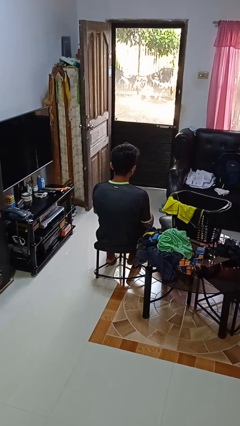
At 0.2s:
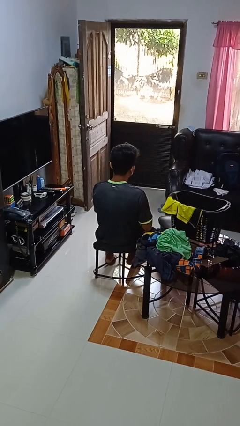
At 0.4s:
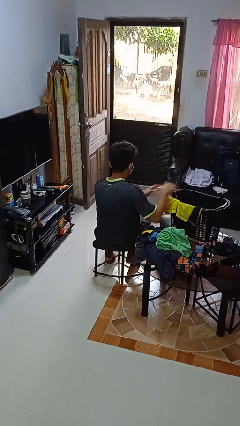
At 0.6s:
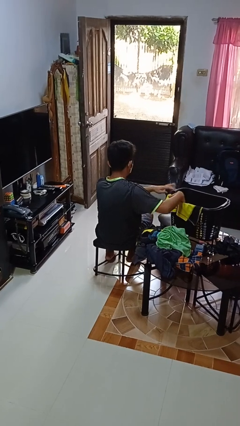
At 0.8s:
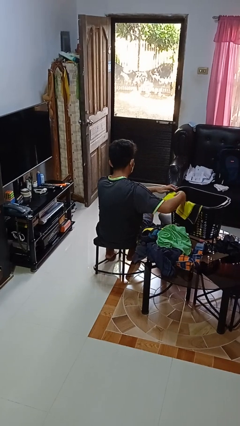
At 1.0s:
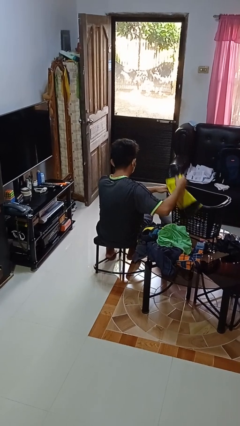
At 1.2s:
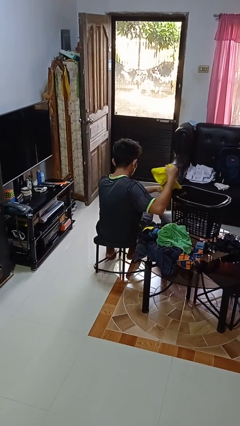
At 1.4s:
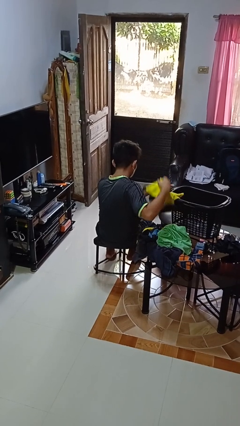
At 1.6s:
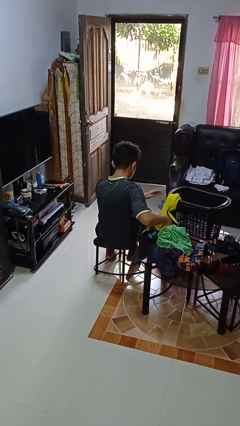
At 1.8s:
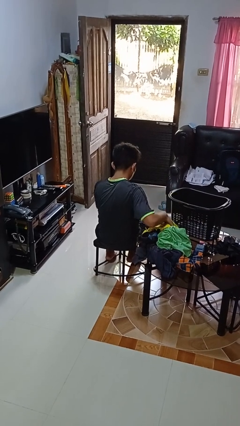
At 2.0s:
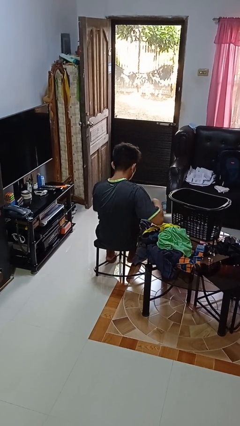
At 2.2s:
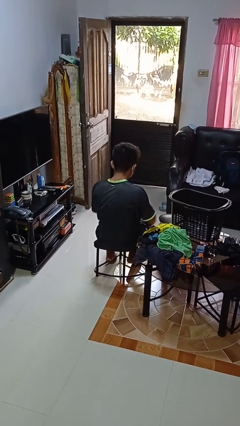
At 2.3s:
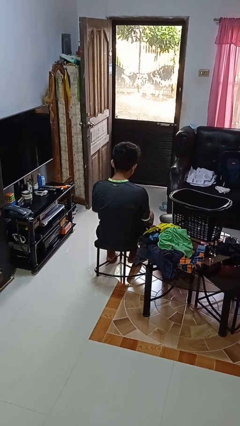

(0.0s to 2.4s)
person takes object from basket

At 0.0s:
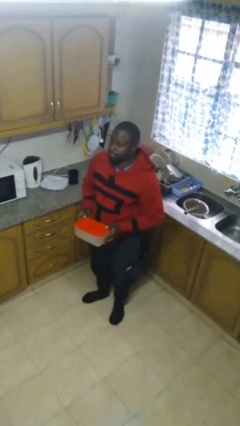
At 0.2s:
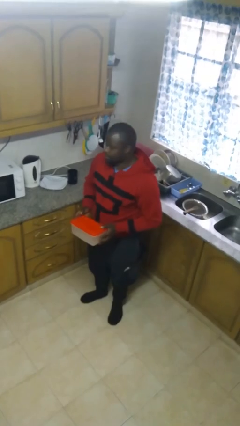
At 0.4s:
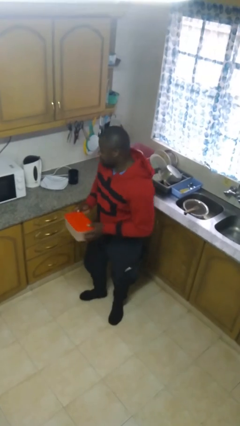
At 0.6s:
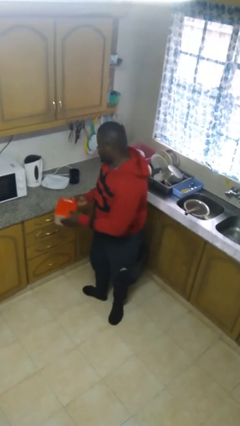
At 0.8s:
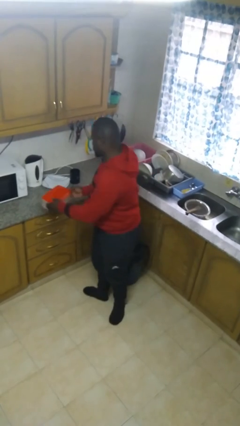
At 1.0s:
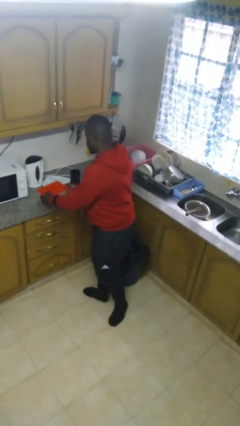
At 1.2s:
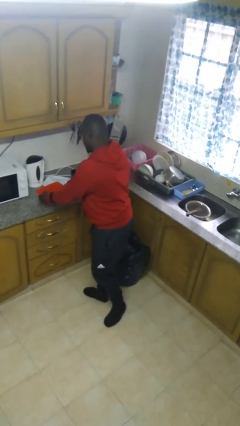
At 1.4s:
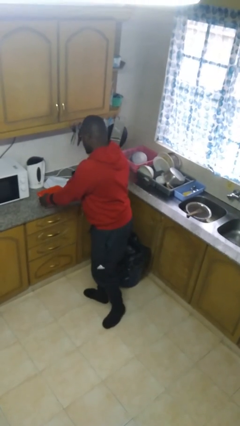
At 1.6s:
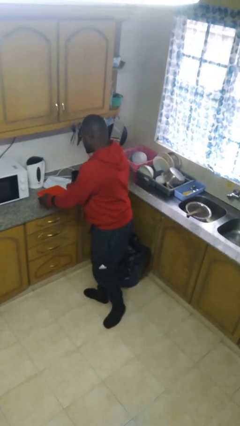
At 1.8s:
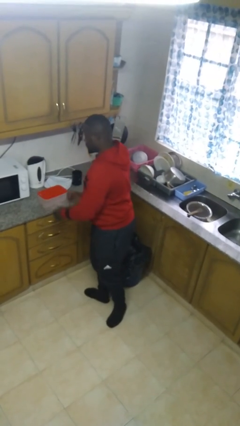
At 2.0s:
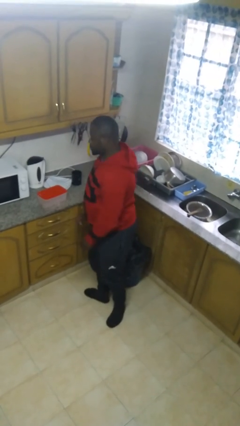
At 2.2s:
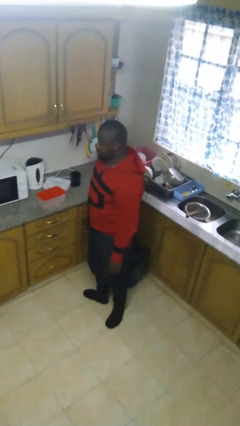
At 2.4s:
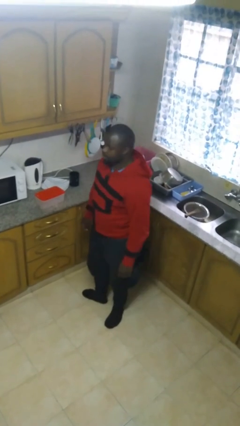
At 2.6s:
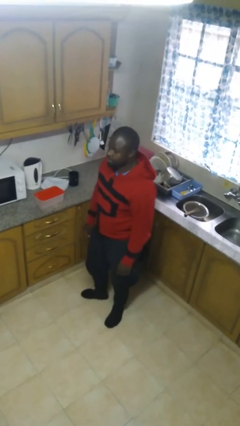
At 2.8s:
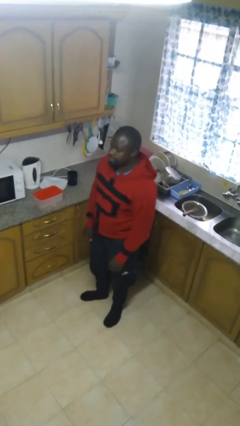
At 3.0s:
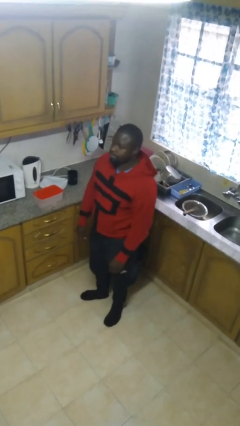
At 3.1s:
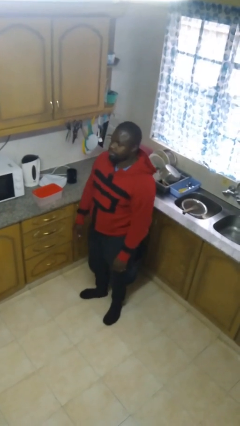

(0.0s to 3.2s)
person puts down object on countertop

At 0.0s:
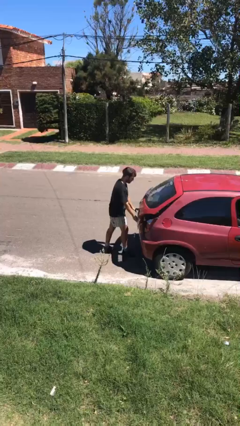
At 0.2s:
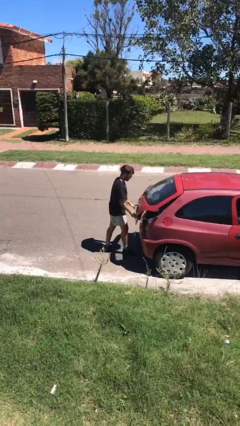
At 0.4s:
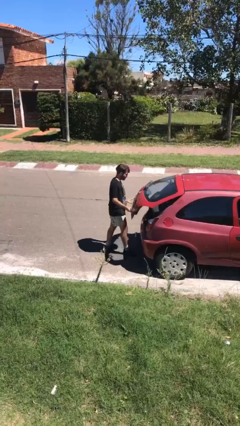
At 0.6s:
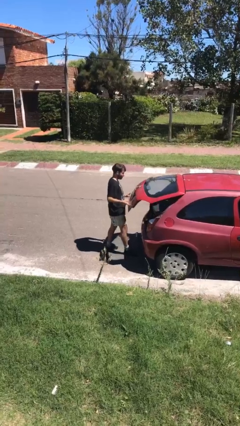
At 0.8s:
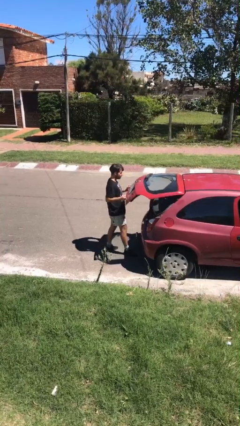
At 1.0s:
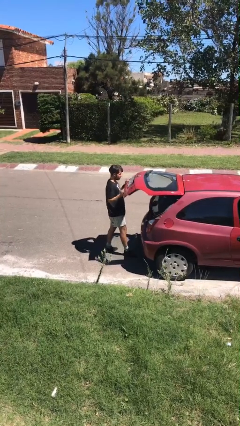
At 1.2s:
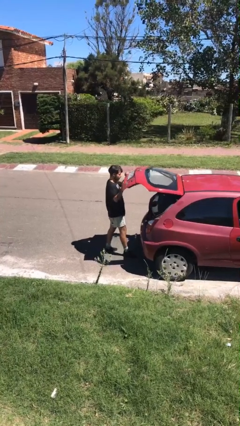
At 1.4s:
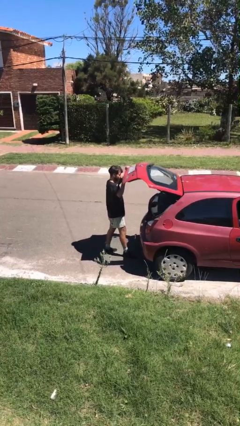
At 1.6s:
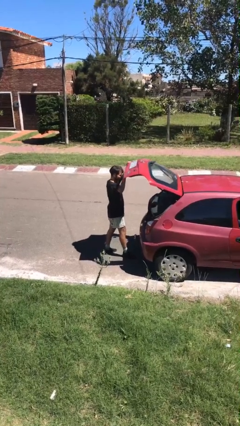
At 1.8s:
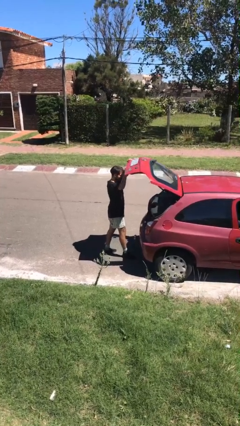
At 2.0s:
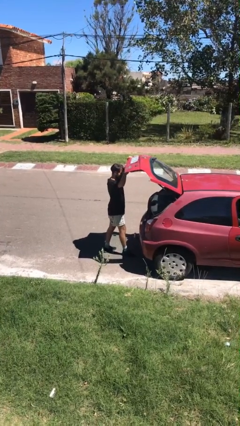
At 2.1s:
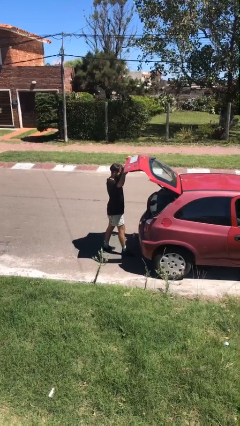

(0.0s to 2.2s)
person opens car trunk

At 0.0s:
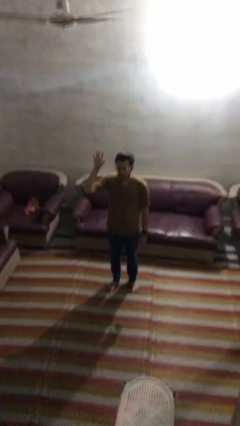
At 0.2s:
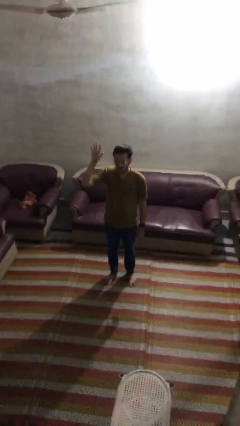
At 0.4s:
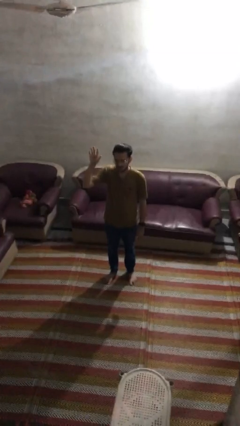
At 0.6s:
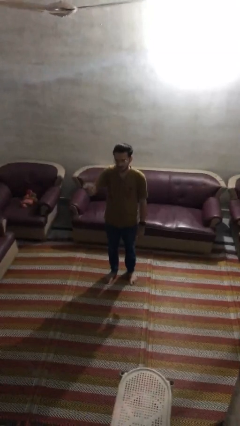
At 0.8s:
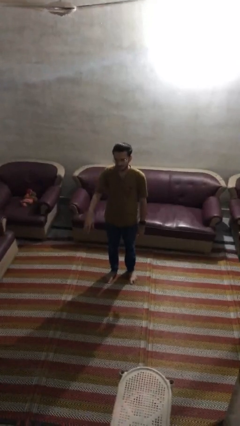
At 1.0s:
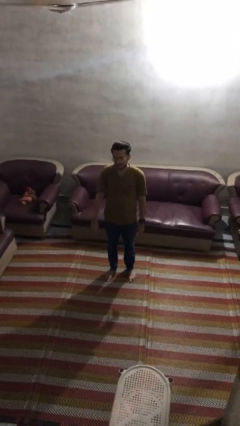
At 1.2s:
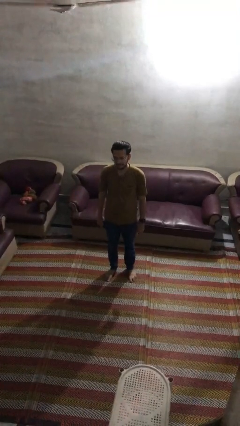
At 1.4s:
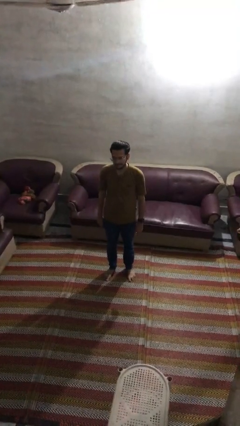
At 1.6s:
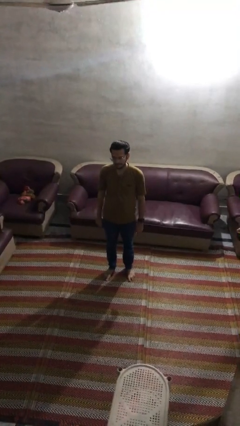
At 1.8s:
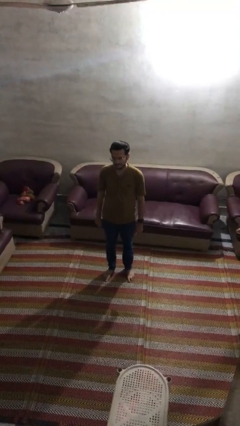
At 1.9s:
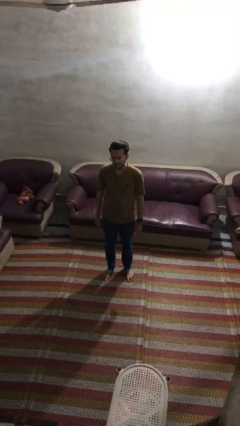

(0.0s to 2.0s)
person gestures lower hand

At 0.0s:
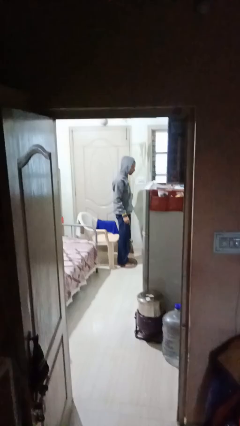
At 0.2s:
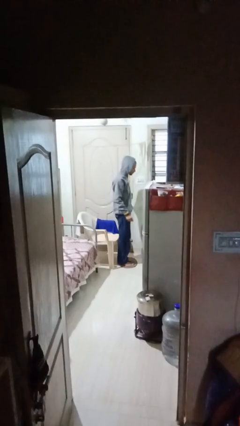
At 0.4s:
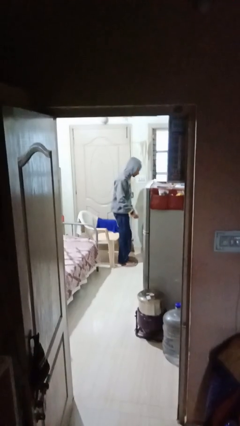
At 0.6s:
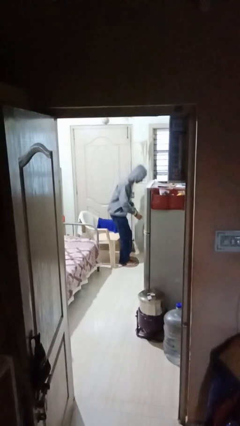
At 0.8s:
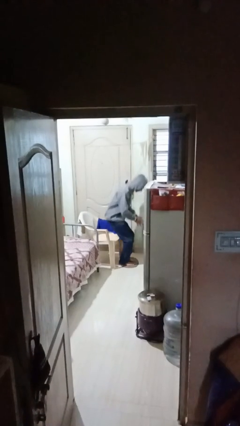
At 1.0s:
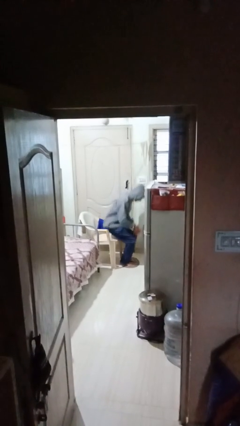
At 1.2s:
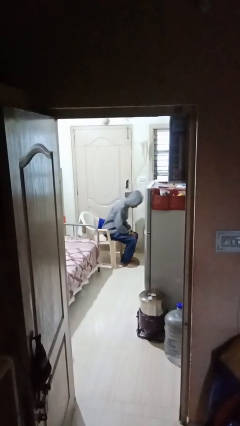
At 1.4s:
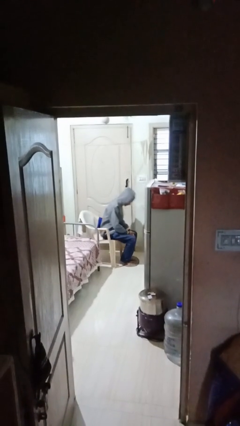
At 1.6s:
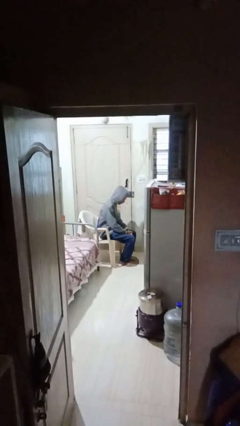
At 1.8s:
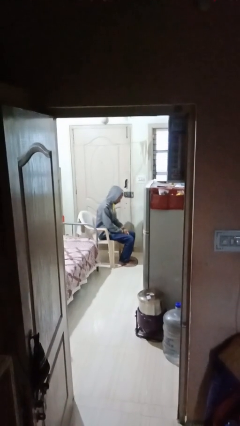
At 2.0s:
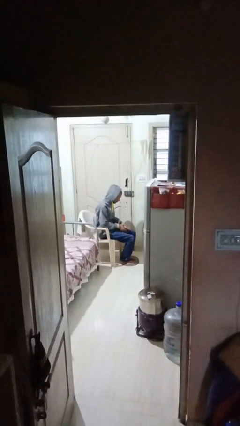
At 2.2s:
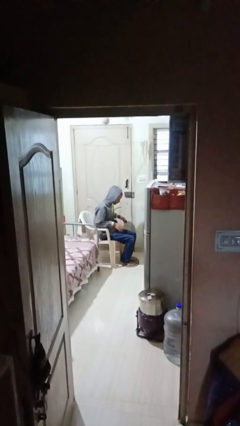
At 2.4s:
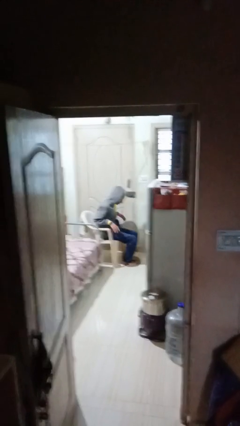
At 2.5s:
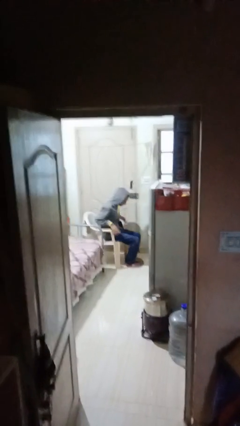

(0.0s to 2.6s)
person sits down

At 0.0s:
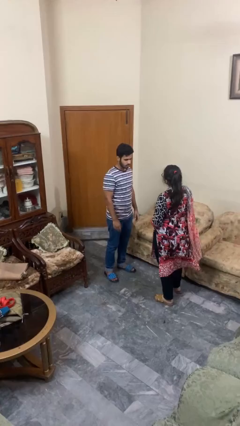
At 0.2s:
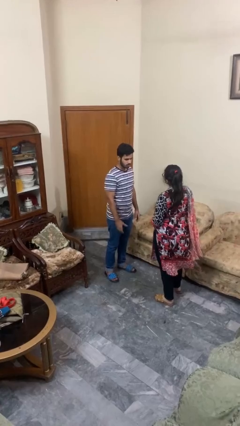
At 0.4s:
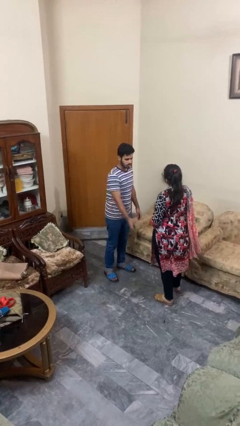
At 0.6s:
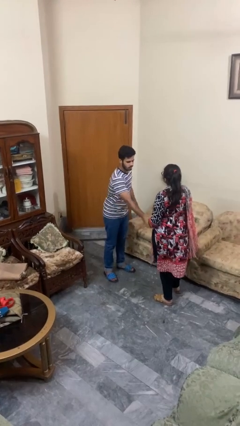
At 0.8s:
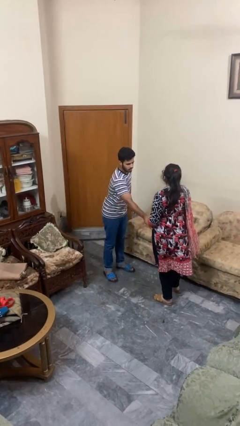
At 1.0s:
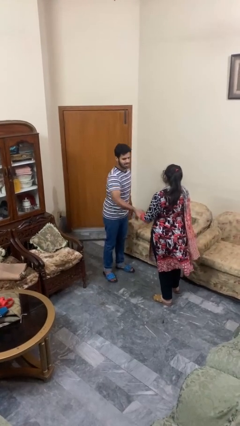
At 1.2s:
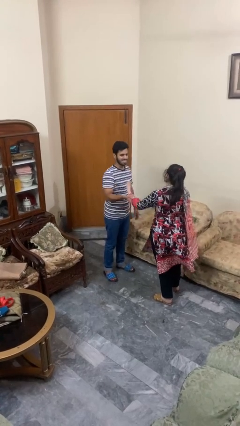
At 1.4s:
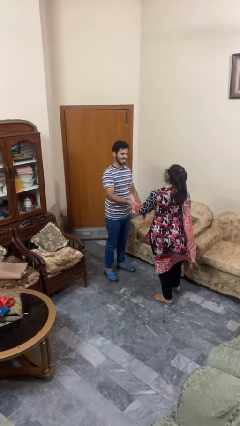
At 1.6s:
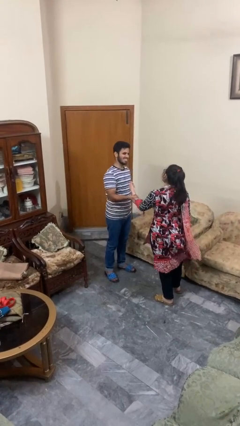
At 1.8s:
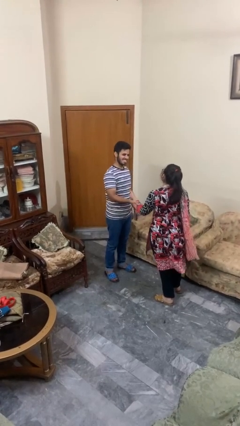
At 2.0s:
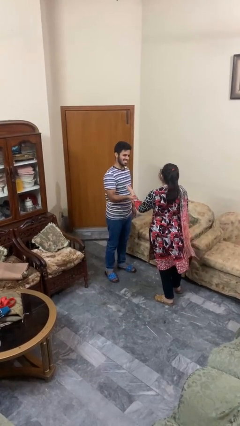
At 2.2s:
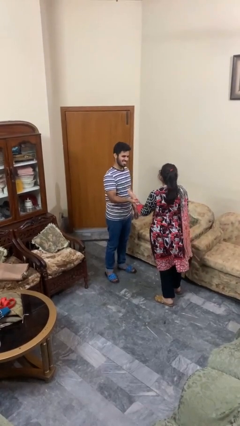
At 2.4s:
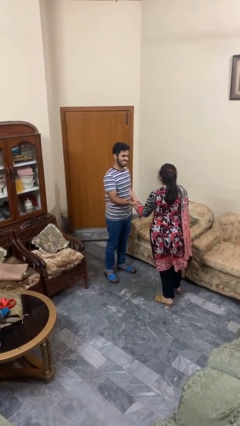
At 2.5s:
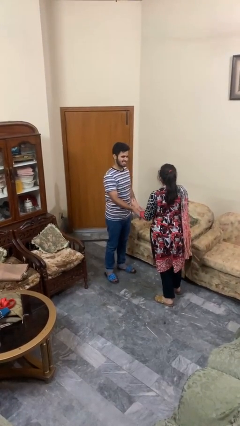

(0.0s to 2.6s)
person grabs person by forearm

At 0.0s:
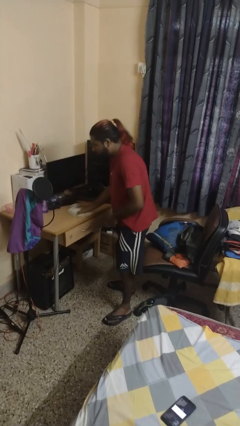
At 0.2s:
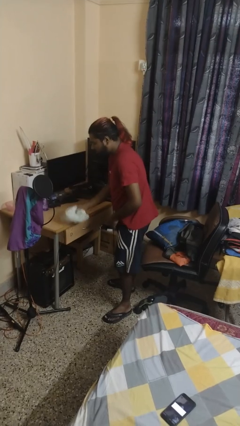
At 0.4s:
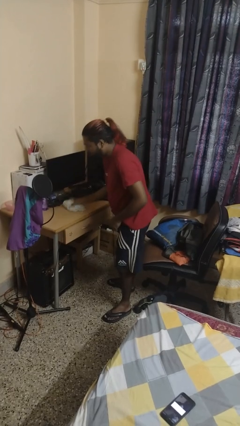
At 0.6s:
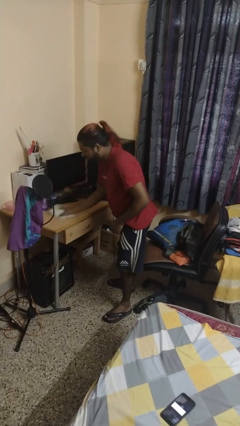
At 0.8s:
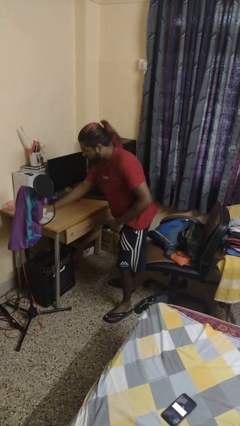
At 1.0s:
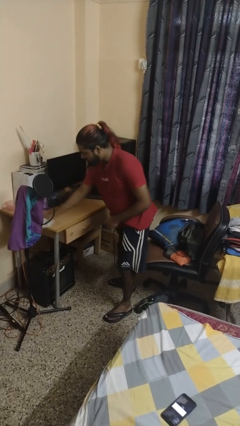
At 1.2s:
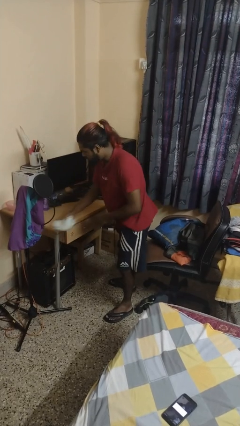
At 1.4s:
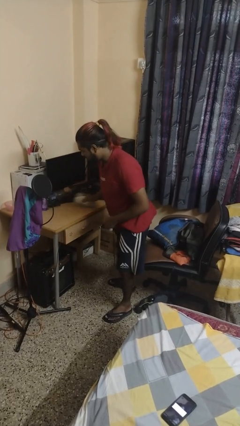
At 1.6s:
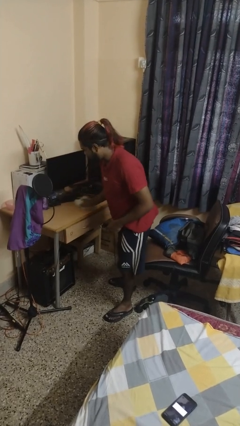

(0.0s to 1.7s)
person cleans table with rag

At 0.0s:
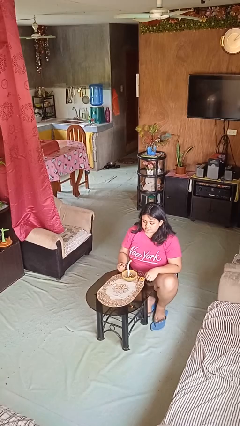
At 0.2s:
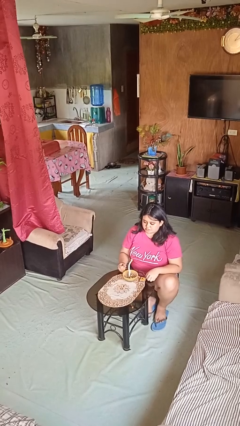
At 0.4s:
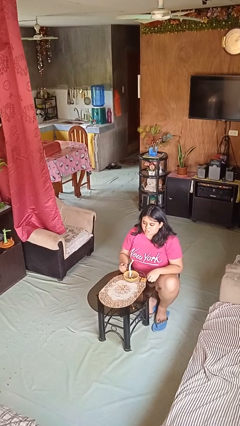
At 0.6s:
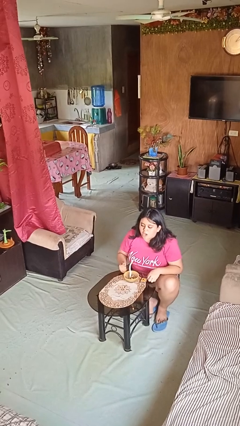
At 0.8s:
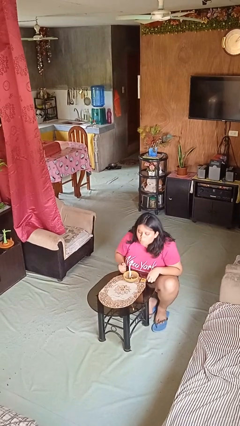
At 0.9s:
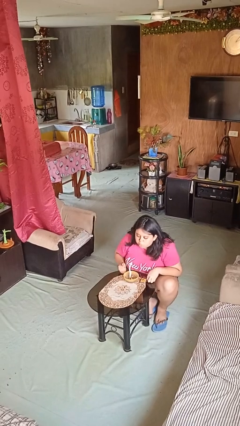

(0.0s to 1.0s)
person extinguishes candle
